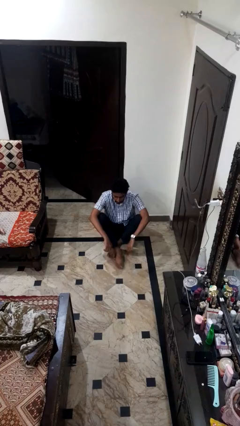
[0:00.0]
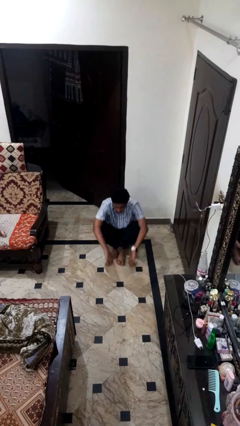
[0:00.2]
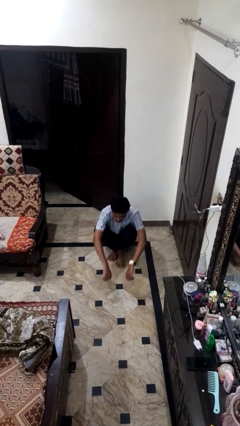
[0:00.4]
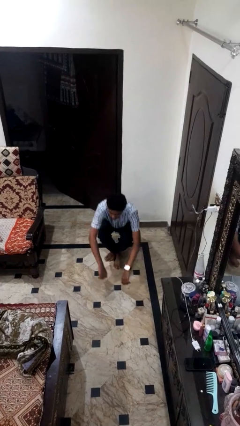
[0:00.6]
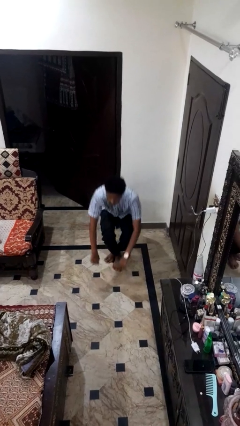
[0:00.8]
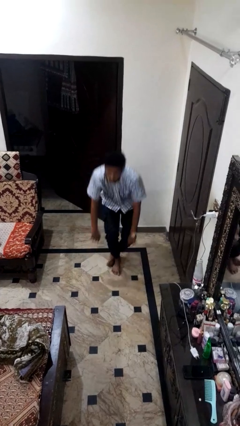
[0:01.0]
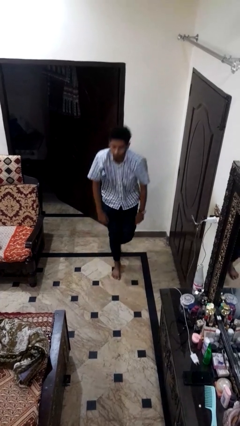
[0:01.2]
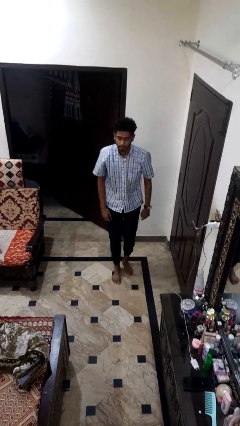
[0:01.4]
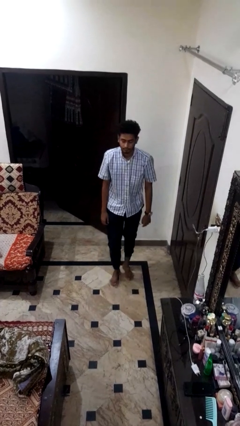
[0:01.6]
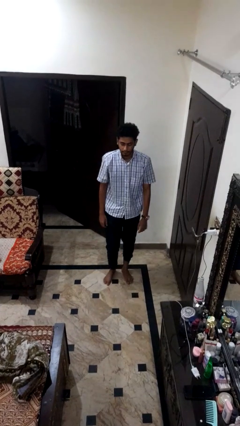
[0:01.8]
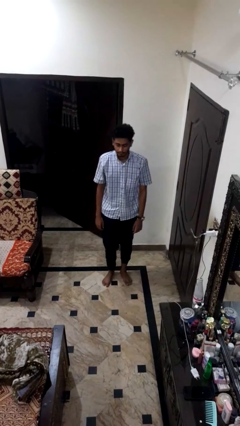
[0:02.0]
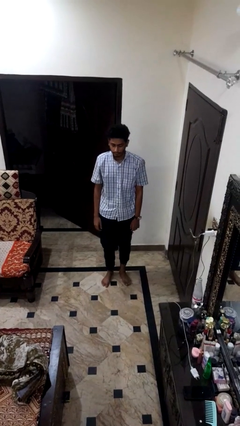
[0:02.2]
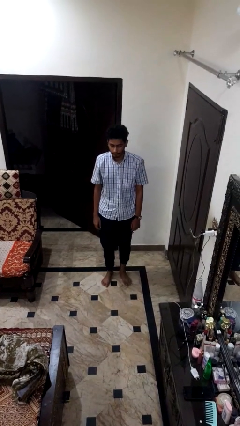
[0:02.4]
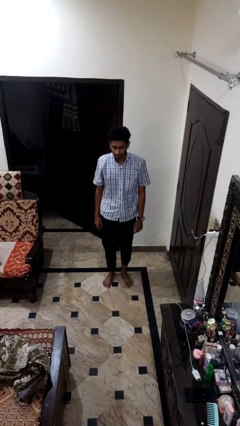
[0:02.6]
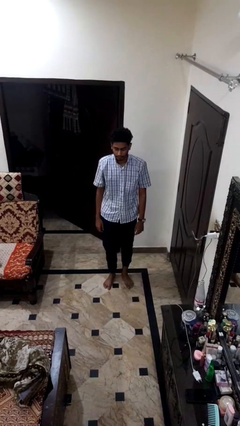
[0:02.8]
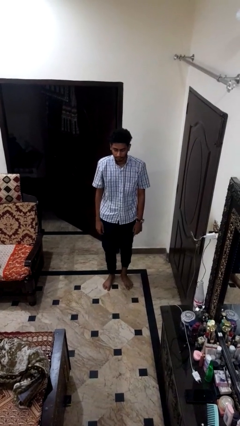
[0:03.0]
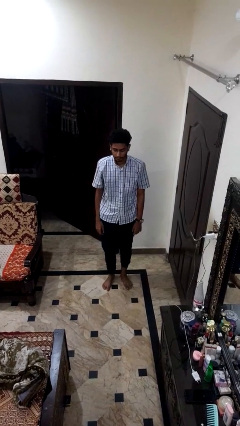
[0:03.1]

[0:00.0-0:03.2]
person stands up from floor

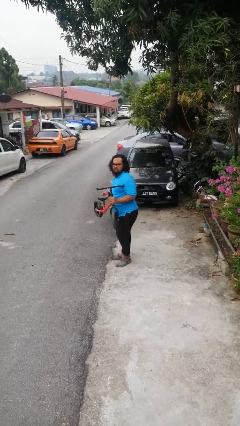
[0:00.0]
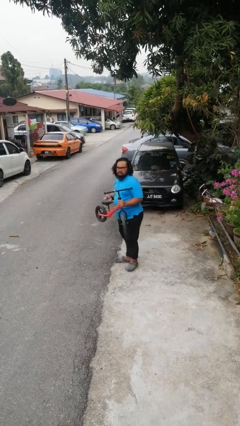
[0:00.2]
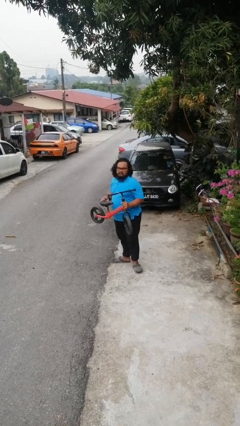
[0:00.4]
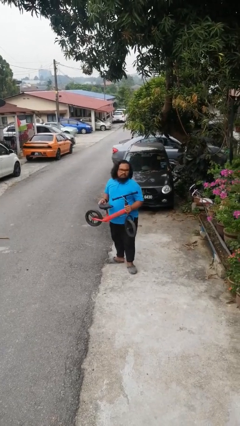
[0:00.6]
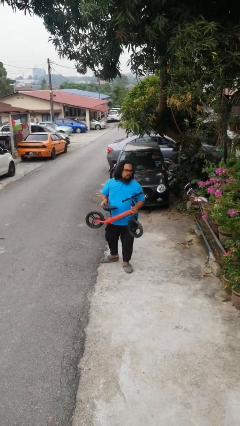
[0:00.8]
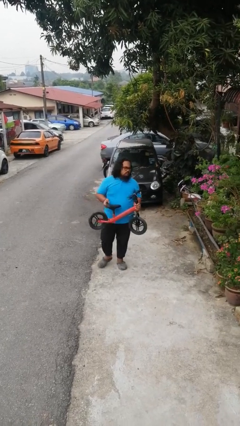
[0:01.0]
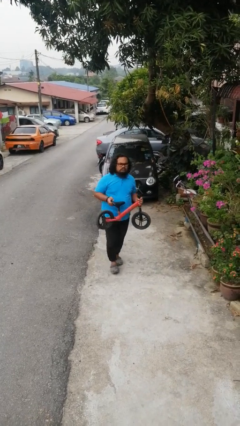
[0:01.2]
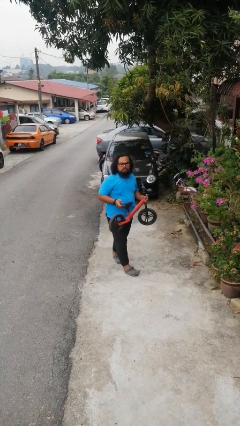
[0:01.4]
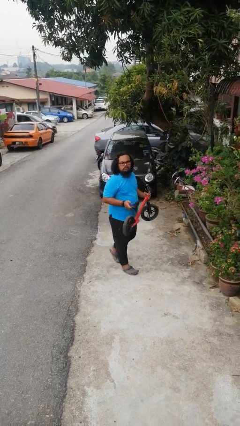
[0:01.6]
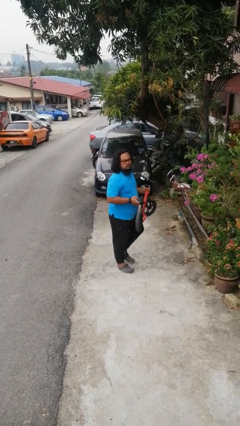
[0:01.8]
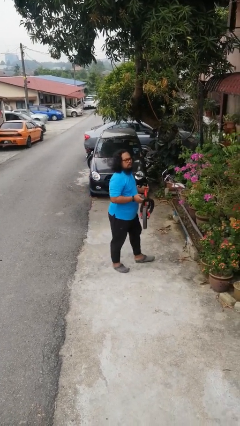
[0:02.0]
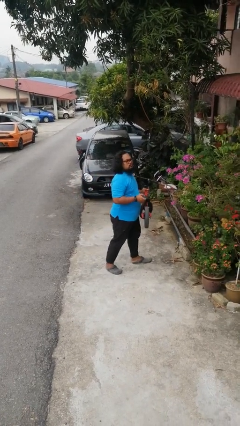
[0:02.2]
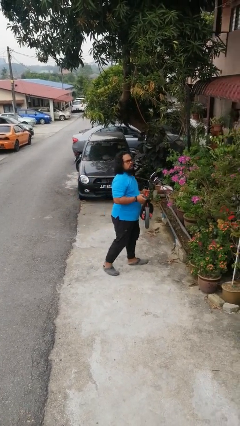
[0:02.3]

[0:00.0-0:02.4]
person carries bicycle

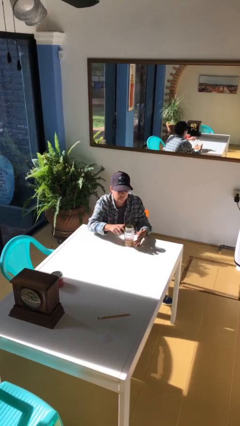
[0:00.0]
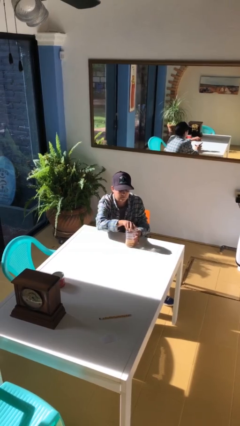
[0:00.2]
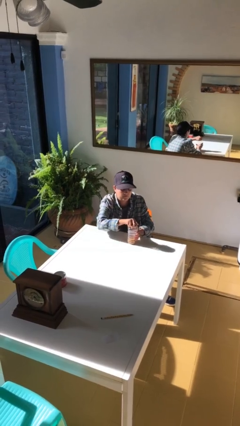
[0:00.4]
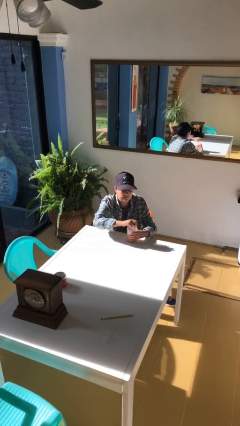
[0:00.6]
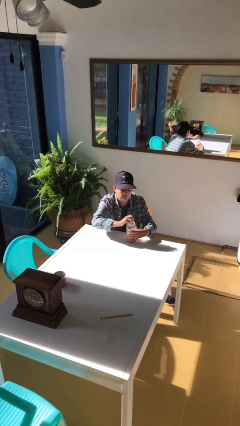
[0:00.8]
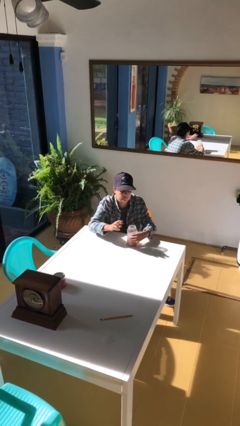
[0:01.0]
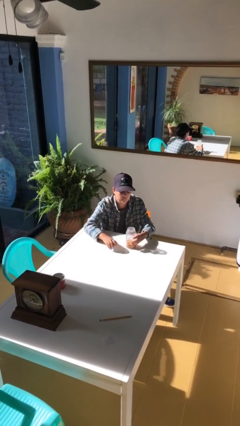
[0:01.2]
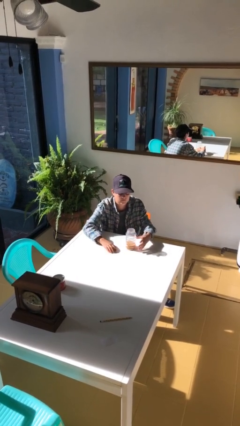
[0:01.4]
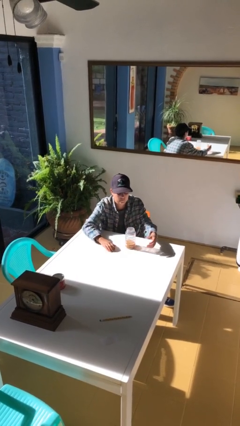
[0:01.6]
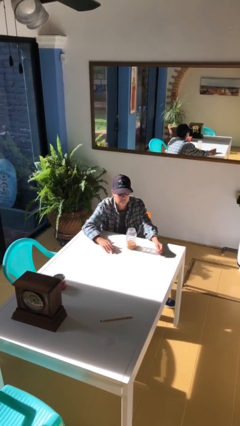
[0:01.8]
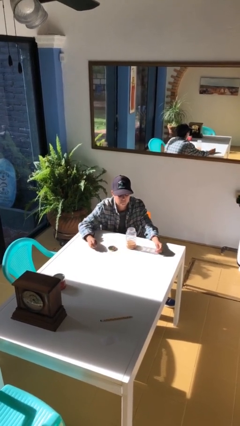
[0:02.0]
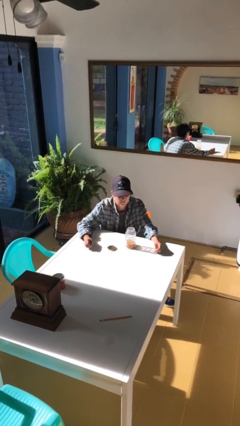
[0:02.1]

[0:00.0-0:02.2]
person opens jar

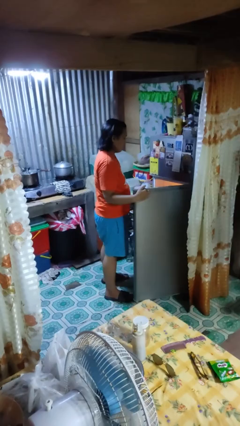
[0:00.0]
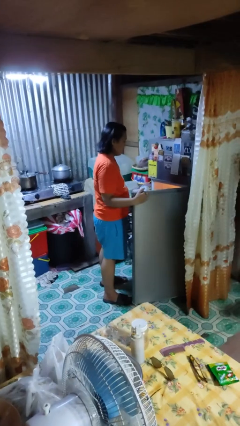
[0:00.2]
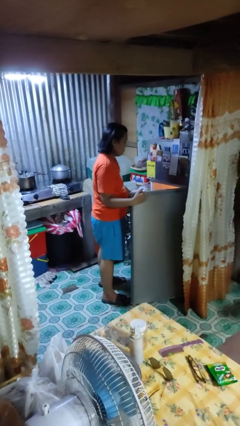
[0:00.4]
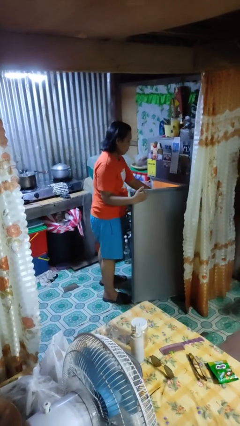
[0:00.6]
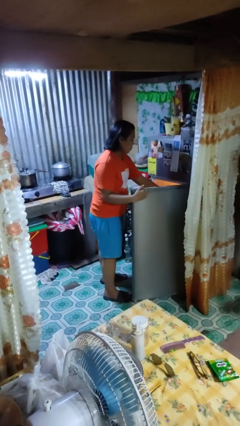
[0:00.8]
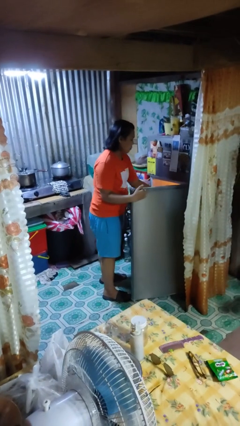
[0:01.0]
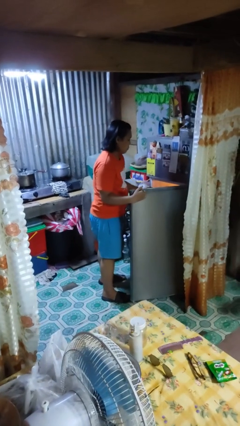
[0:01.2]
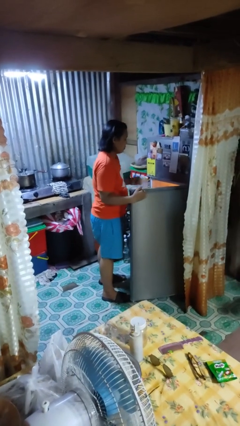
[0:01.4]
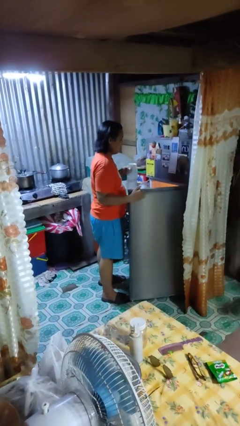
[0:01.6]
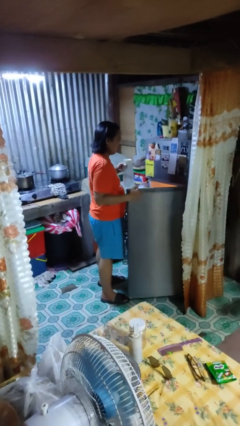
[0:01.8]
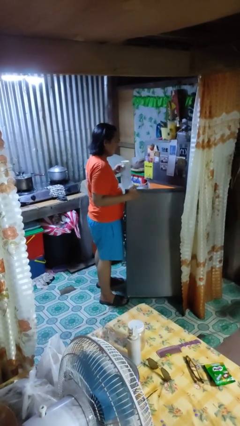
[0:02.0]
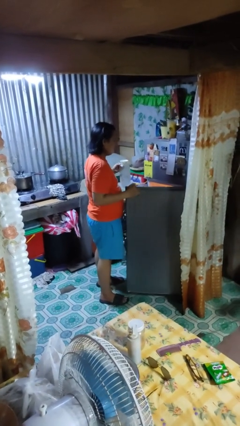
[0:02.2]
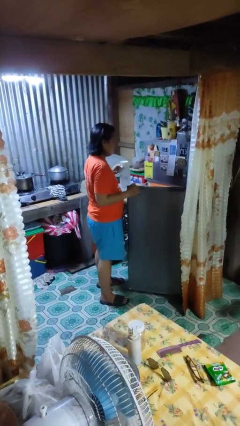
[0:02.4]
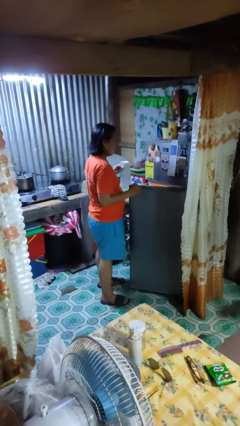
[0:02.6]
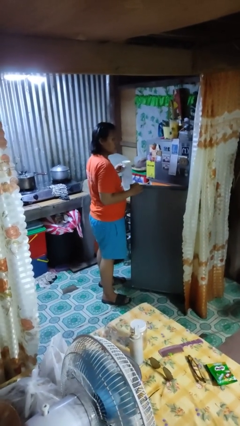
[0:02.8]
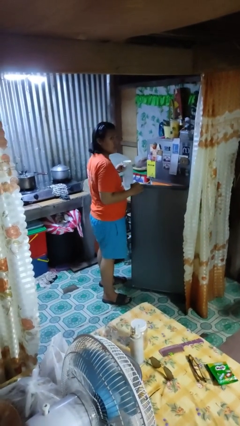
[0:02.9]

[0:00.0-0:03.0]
person takes object from refrigerator

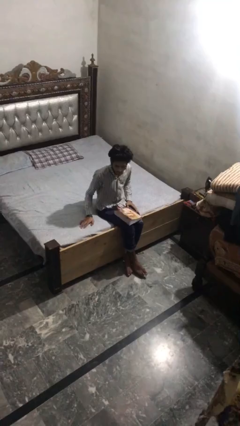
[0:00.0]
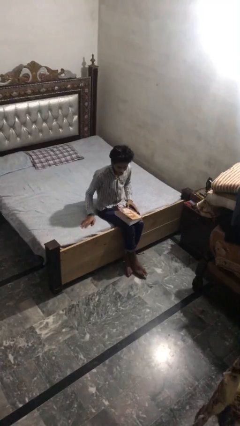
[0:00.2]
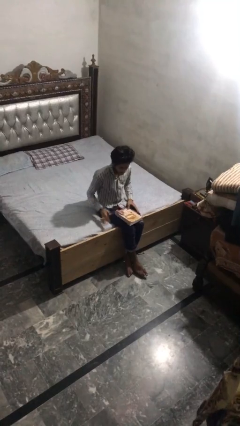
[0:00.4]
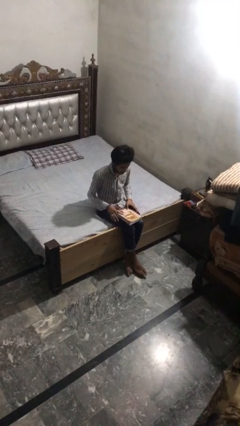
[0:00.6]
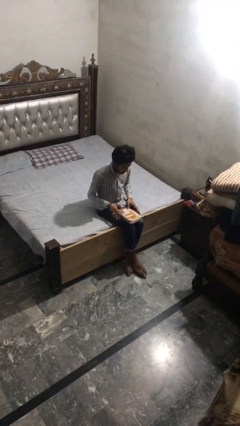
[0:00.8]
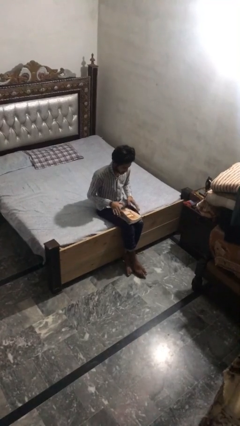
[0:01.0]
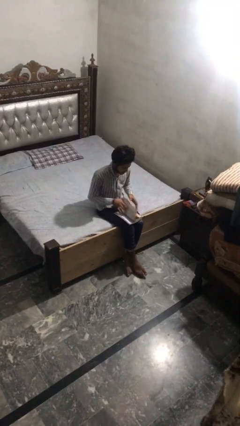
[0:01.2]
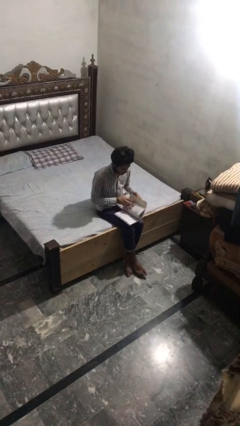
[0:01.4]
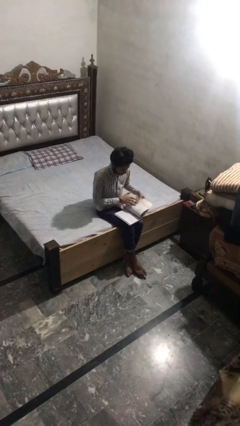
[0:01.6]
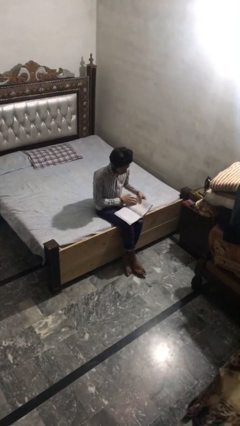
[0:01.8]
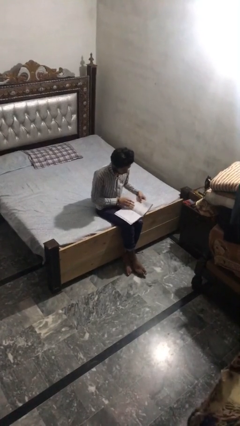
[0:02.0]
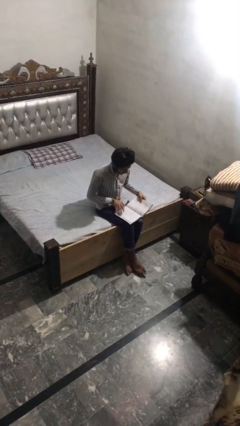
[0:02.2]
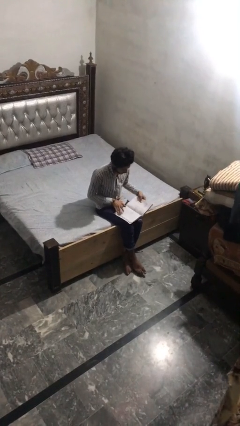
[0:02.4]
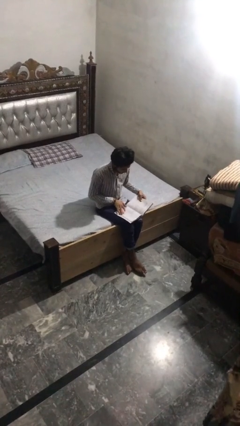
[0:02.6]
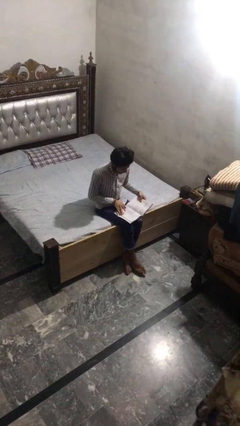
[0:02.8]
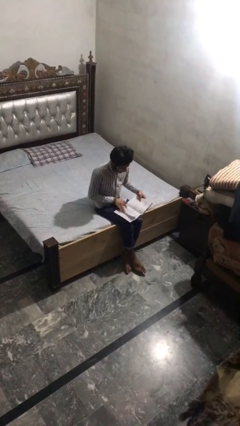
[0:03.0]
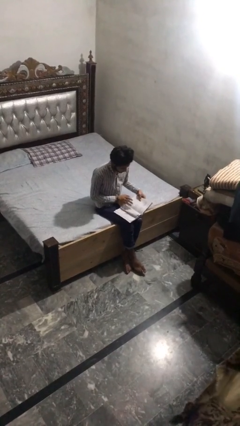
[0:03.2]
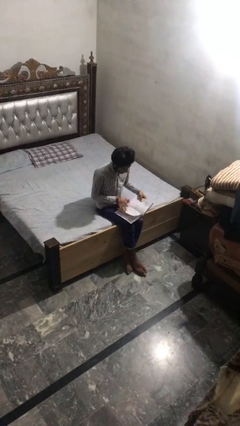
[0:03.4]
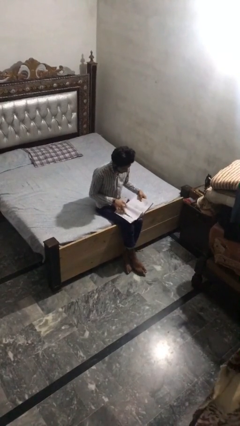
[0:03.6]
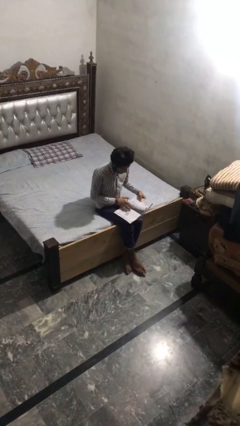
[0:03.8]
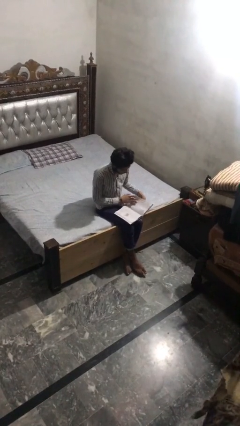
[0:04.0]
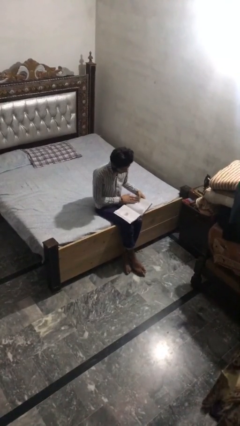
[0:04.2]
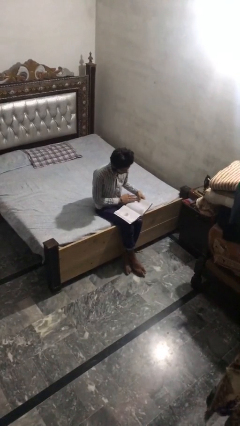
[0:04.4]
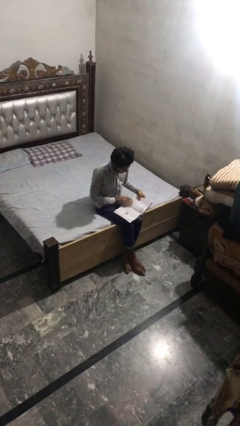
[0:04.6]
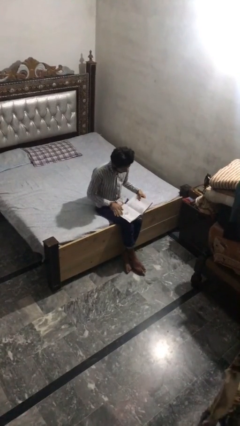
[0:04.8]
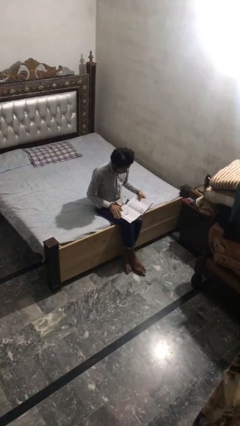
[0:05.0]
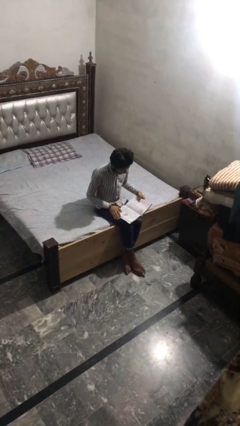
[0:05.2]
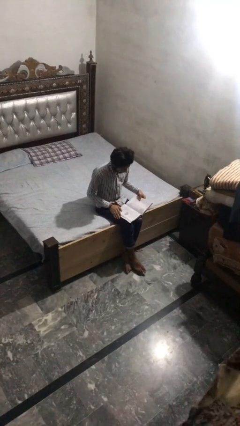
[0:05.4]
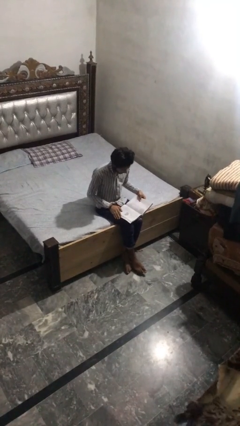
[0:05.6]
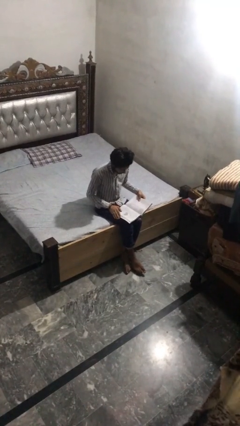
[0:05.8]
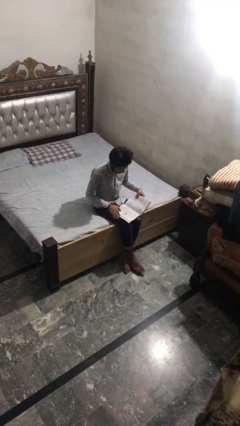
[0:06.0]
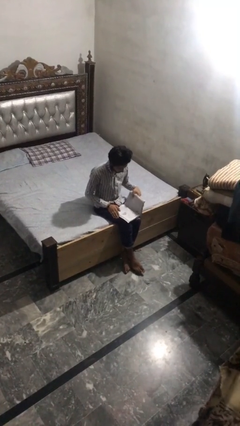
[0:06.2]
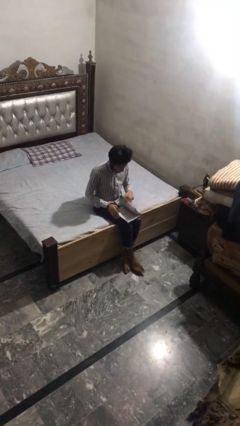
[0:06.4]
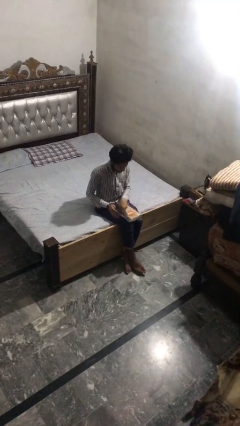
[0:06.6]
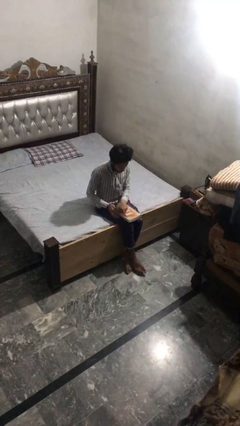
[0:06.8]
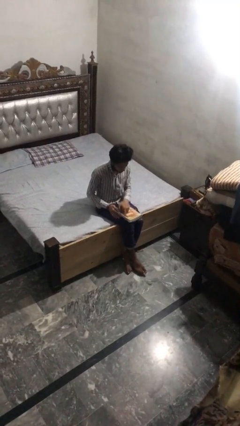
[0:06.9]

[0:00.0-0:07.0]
person reads book
